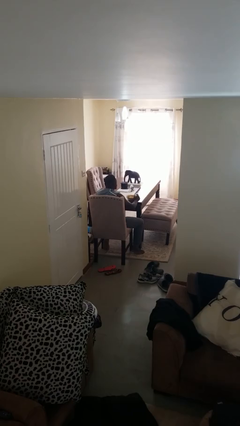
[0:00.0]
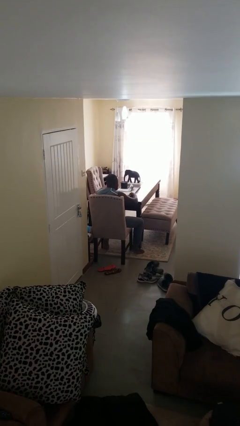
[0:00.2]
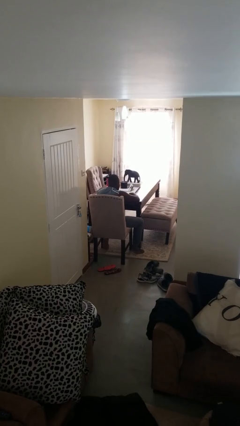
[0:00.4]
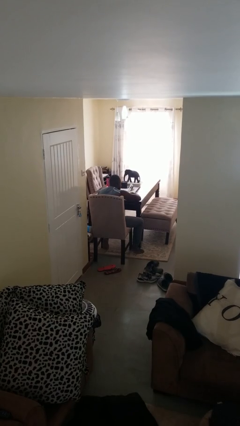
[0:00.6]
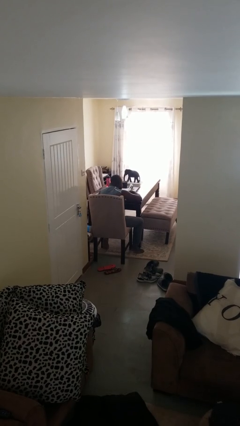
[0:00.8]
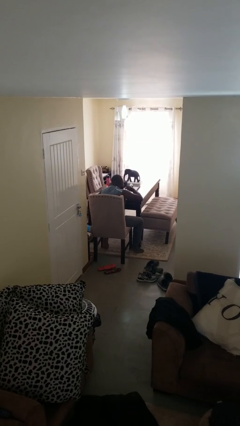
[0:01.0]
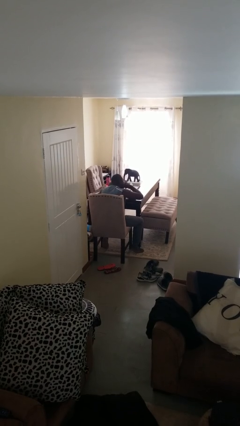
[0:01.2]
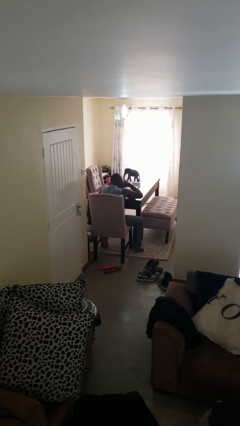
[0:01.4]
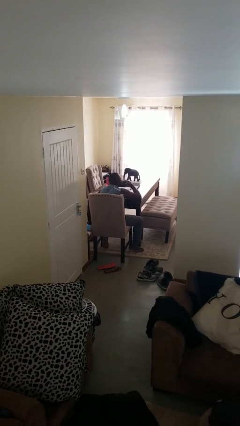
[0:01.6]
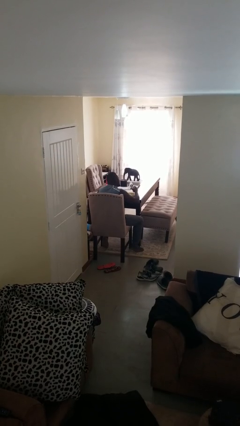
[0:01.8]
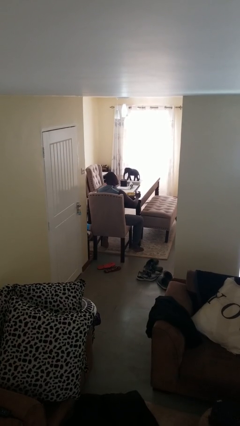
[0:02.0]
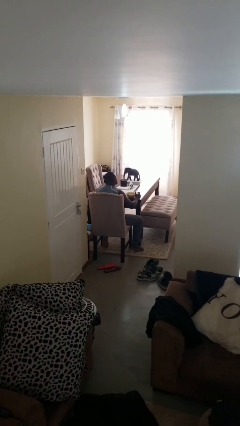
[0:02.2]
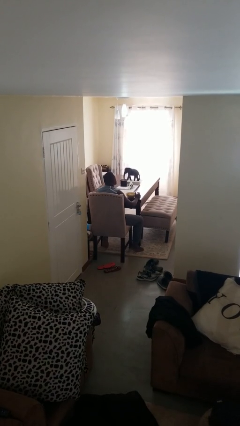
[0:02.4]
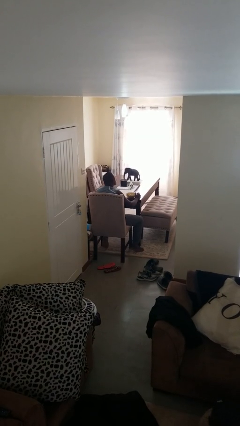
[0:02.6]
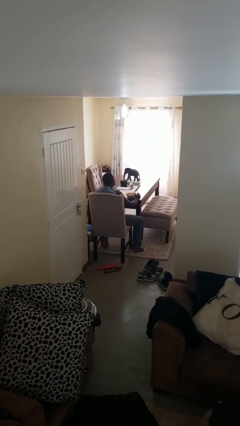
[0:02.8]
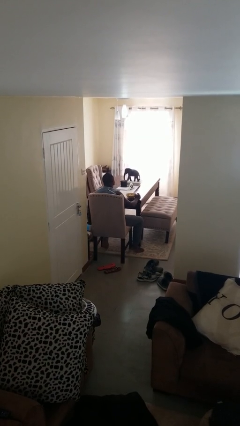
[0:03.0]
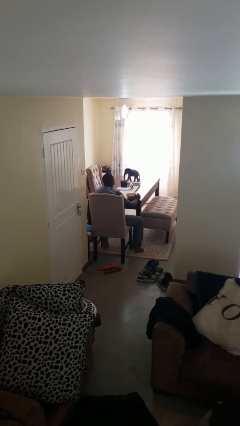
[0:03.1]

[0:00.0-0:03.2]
person eats with hands

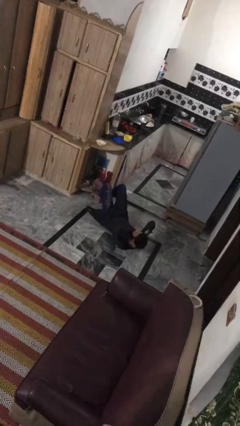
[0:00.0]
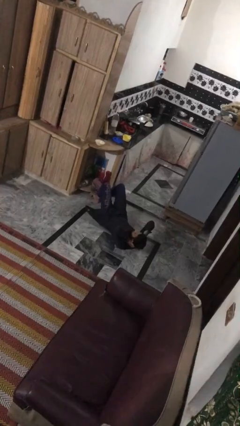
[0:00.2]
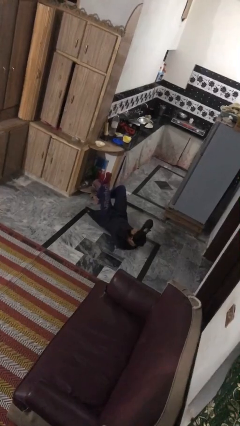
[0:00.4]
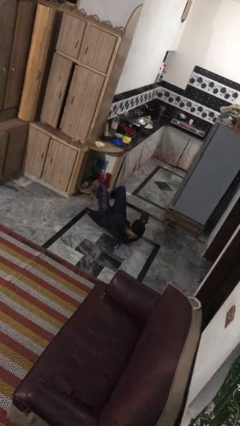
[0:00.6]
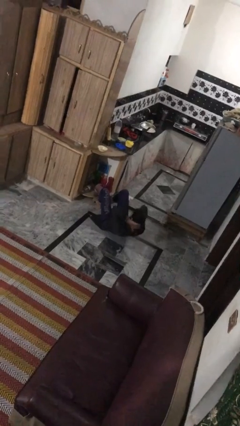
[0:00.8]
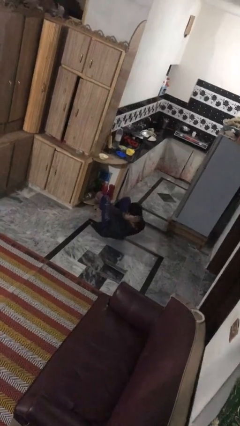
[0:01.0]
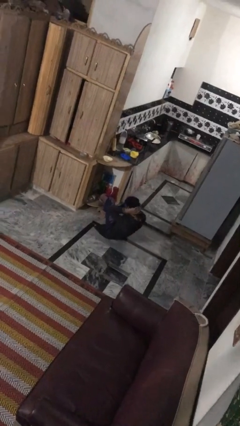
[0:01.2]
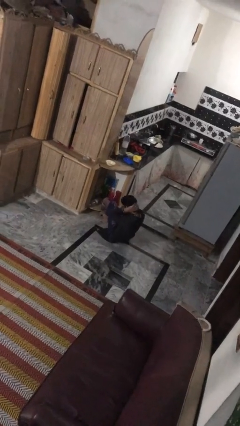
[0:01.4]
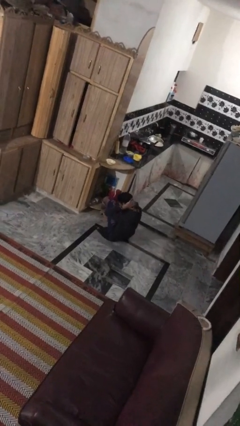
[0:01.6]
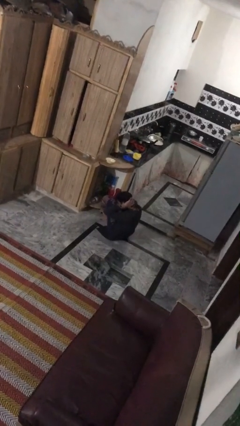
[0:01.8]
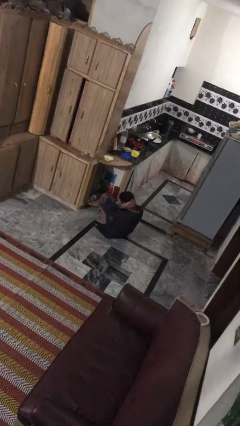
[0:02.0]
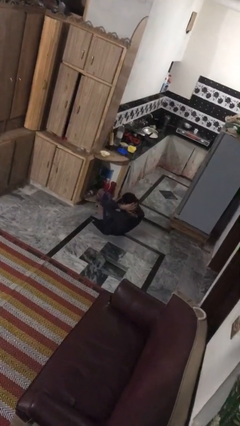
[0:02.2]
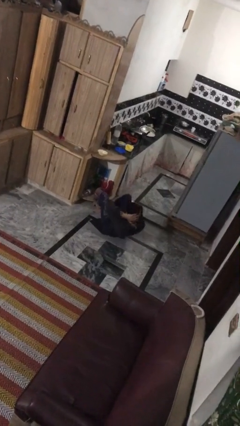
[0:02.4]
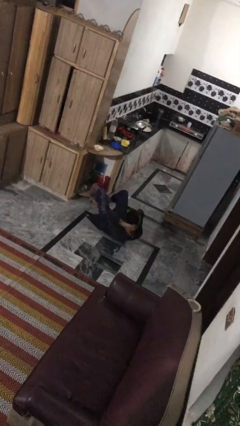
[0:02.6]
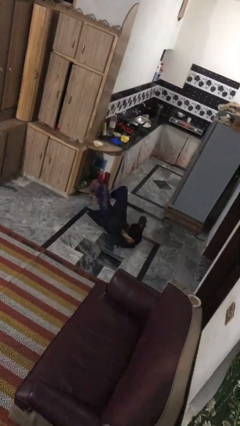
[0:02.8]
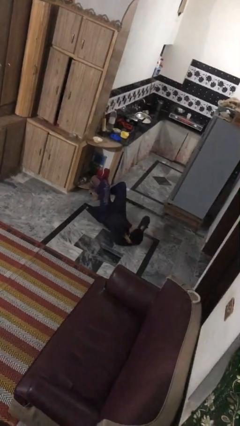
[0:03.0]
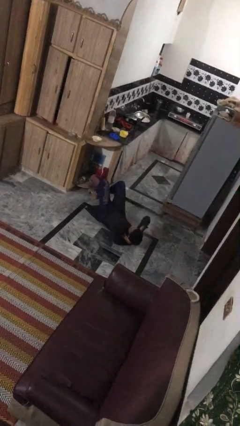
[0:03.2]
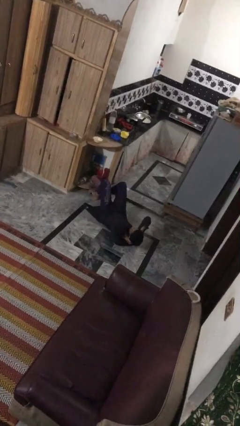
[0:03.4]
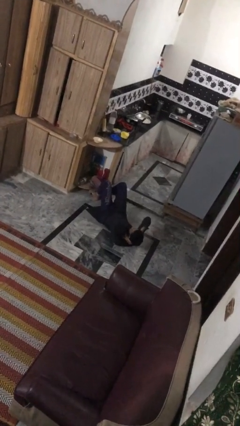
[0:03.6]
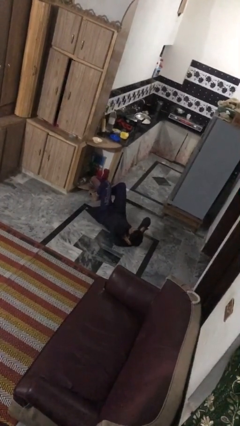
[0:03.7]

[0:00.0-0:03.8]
person exercises with situp

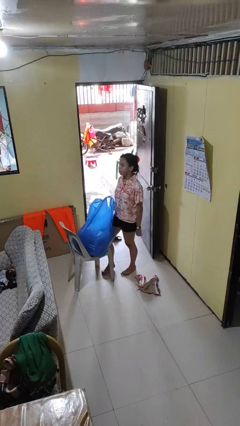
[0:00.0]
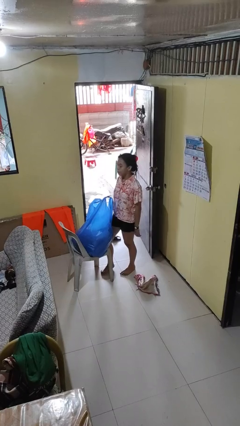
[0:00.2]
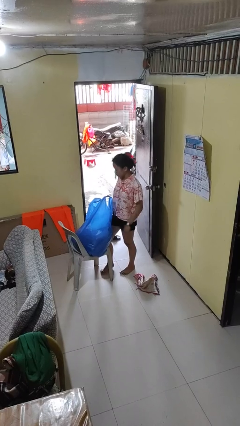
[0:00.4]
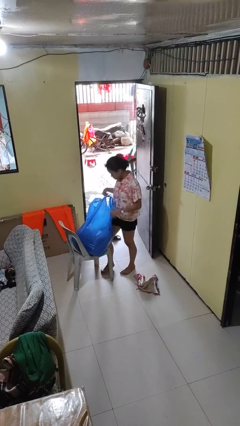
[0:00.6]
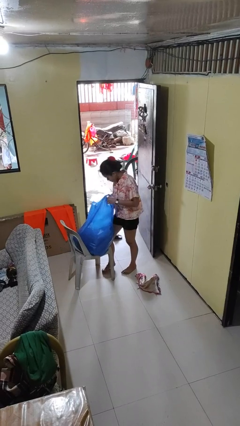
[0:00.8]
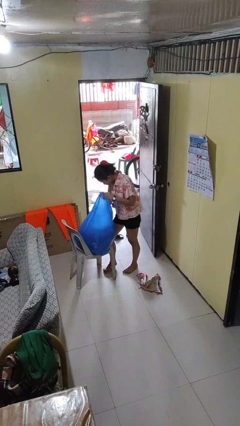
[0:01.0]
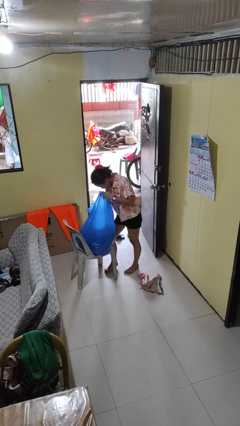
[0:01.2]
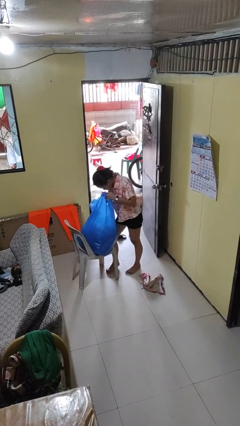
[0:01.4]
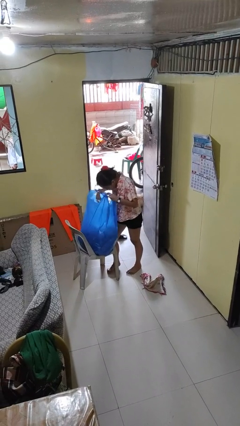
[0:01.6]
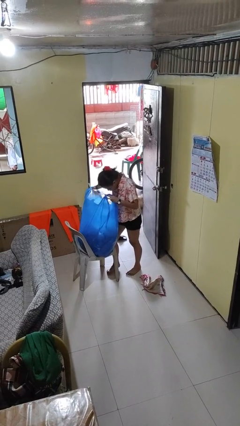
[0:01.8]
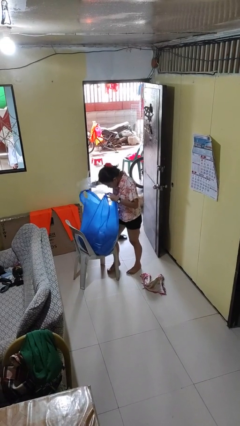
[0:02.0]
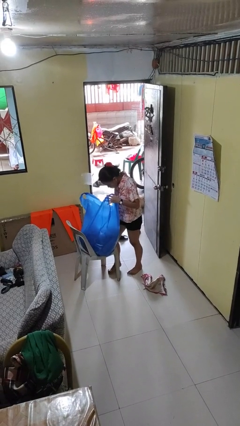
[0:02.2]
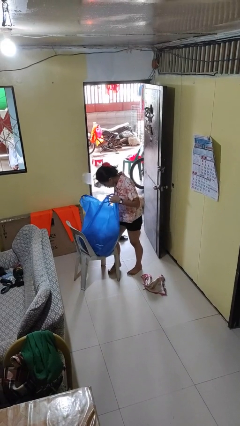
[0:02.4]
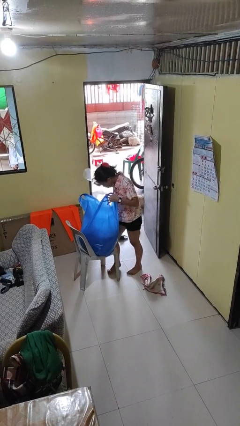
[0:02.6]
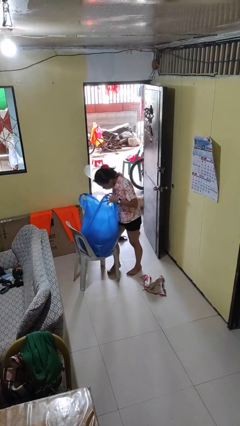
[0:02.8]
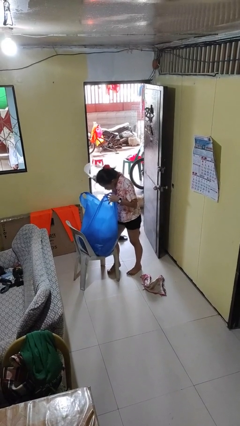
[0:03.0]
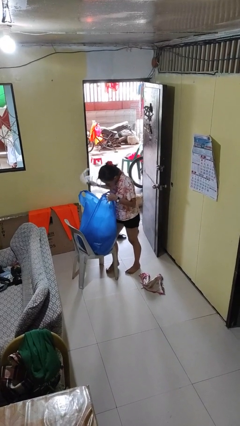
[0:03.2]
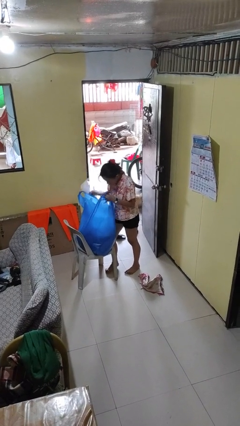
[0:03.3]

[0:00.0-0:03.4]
person searches in bag

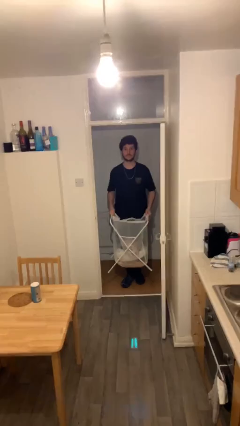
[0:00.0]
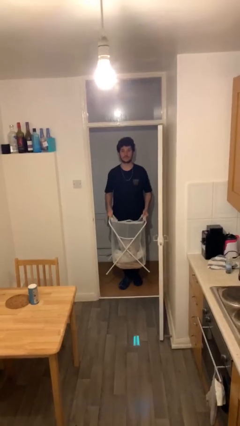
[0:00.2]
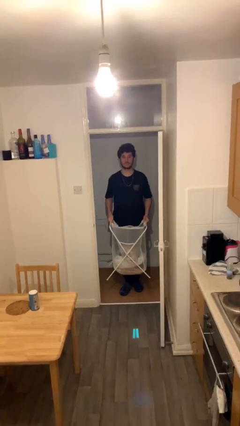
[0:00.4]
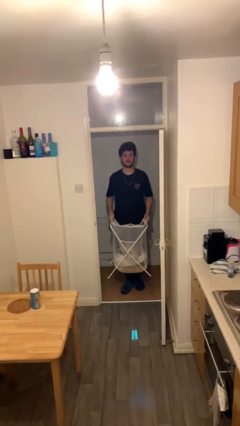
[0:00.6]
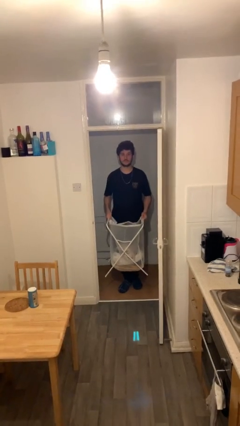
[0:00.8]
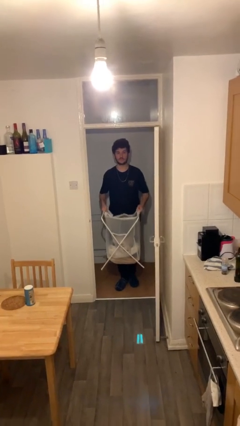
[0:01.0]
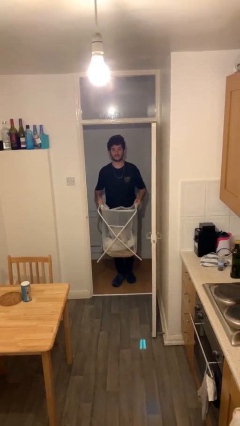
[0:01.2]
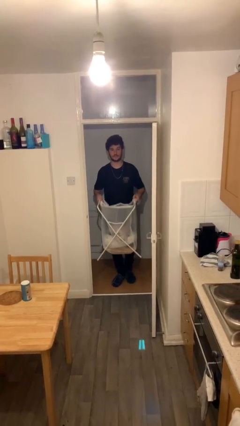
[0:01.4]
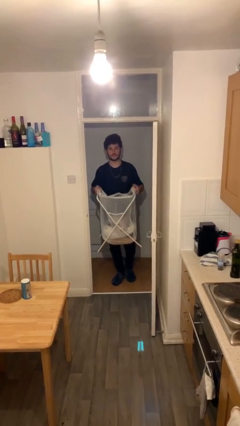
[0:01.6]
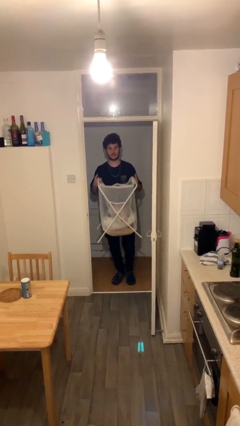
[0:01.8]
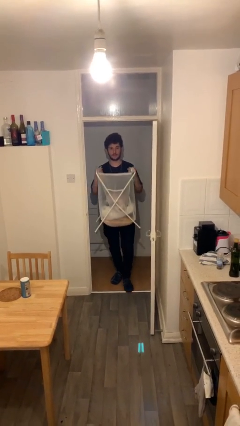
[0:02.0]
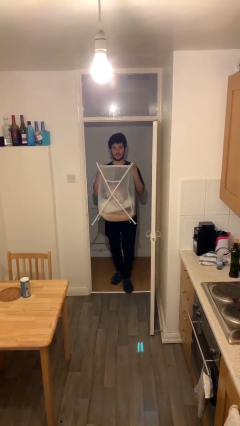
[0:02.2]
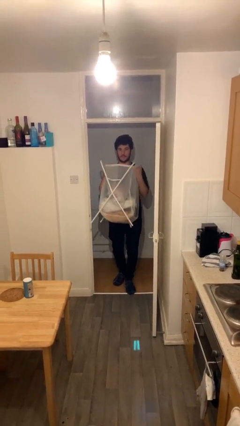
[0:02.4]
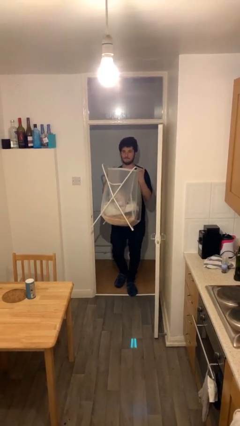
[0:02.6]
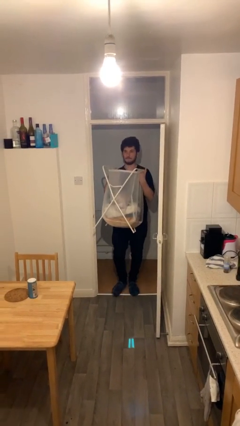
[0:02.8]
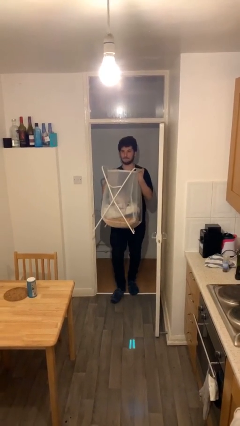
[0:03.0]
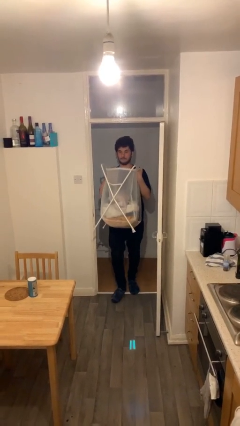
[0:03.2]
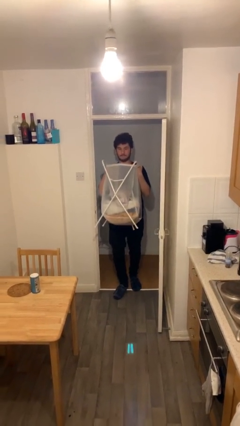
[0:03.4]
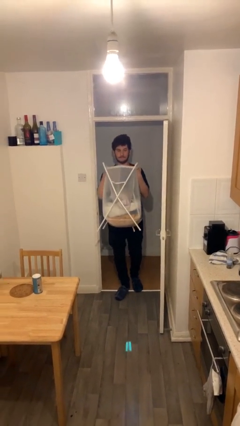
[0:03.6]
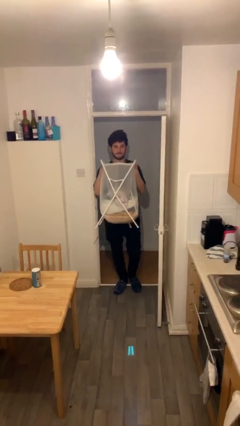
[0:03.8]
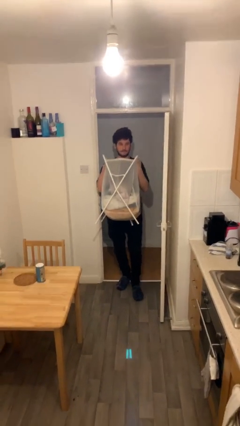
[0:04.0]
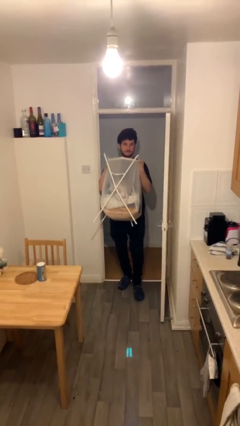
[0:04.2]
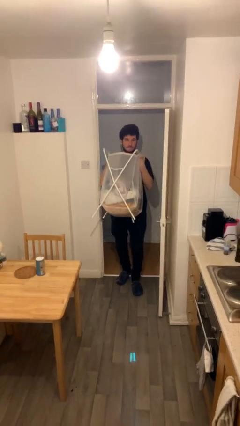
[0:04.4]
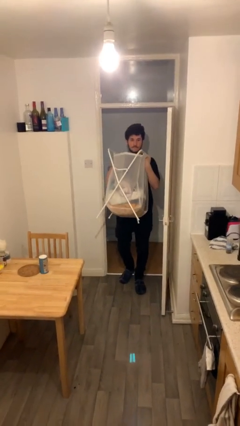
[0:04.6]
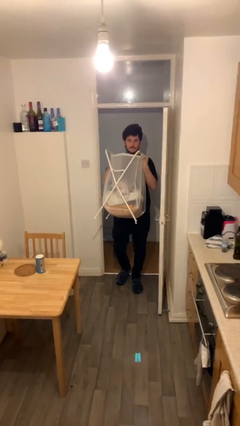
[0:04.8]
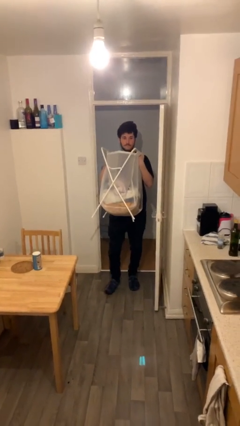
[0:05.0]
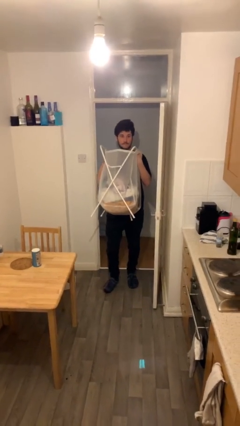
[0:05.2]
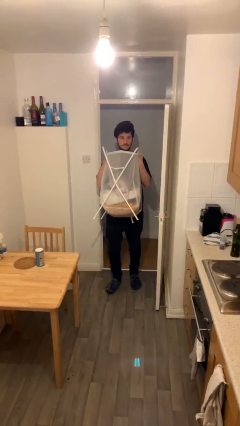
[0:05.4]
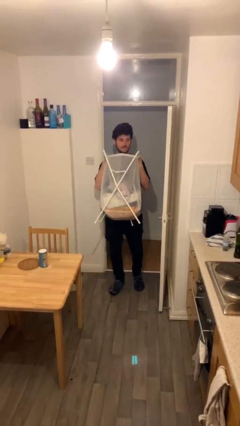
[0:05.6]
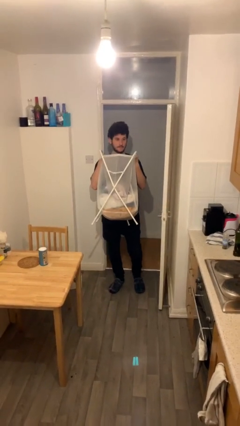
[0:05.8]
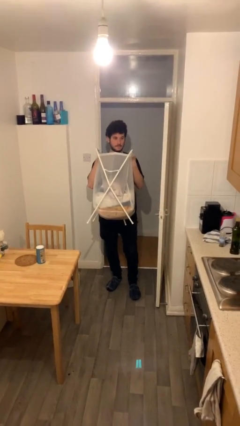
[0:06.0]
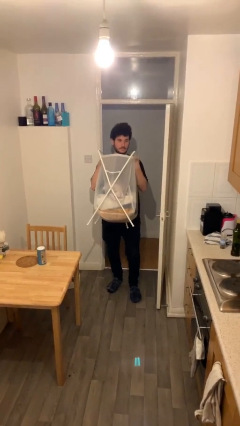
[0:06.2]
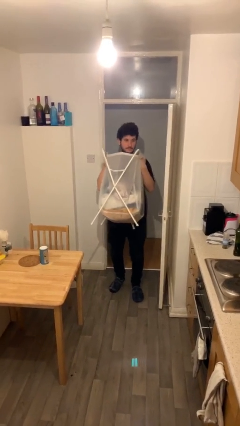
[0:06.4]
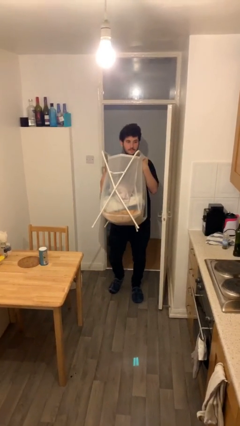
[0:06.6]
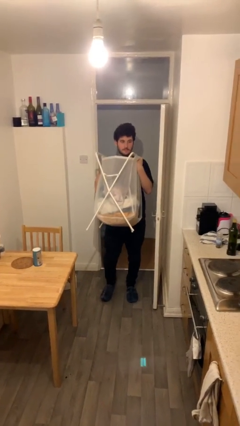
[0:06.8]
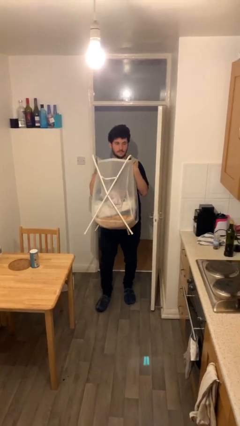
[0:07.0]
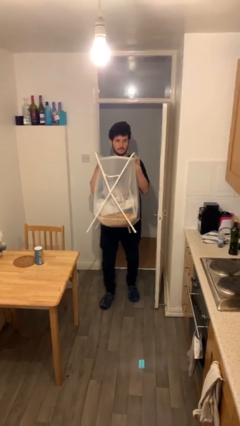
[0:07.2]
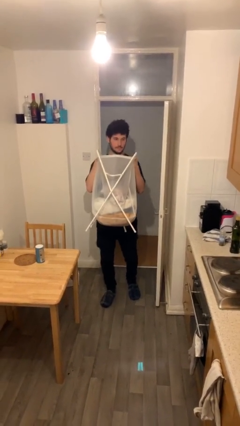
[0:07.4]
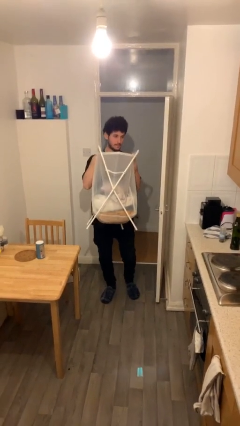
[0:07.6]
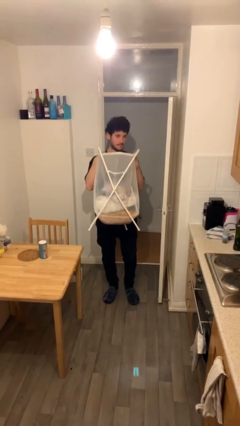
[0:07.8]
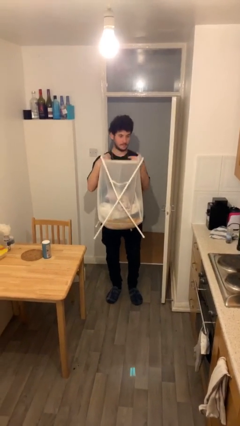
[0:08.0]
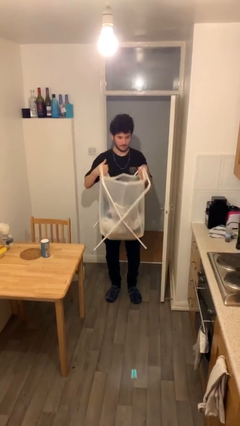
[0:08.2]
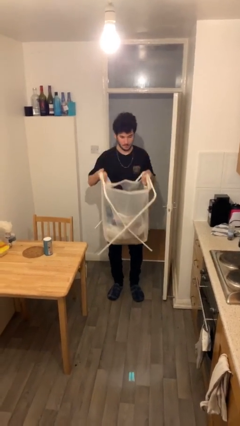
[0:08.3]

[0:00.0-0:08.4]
person carries heavy object
